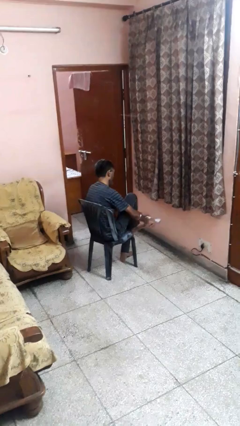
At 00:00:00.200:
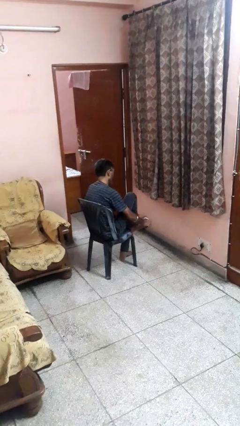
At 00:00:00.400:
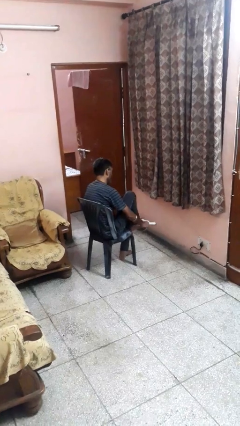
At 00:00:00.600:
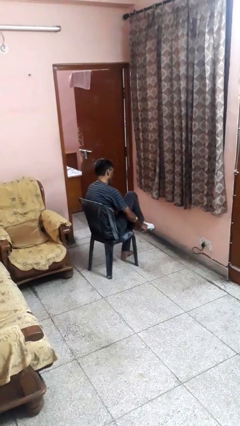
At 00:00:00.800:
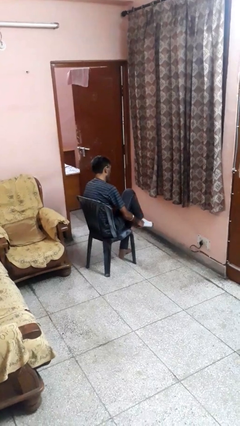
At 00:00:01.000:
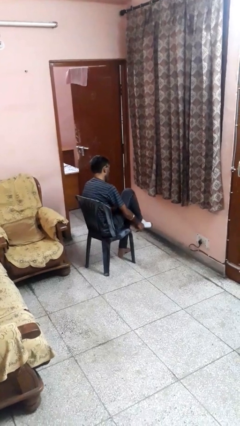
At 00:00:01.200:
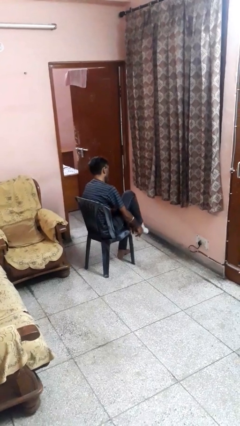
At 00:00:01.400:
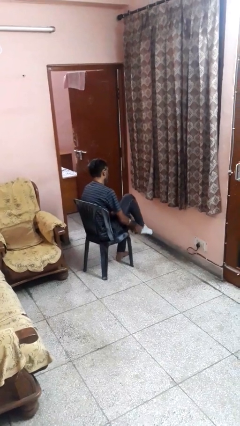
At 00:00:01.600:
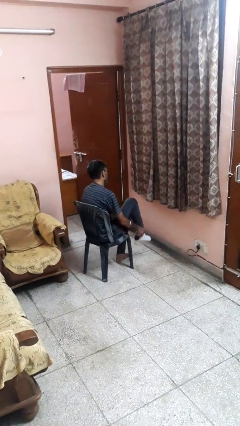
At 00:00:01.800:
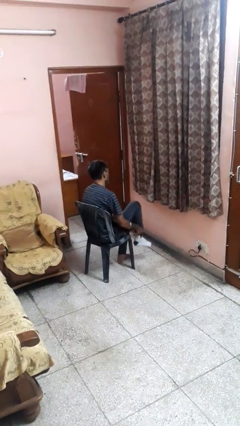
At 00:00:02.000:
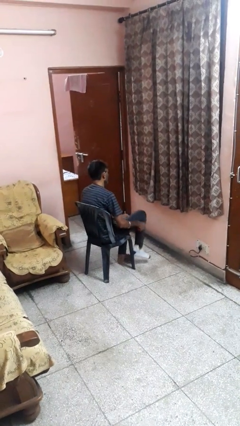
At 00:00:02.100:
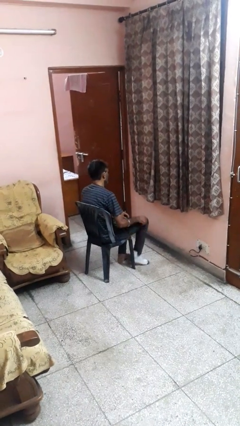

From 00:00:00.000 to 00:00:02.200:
person puts on socks

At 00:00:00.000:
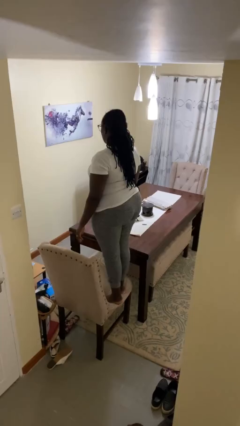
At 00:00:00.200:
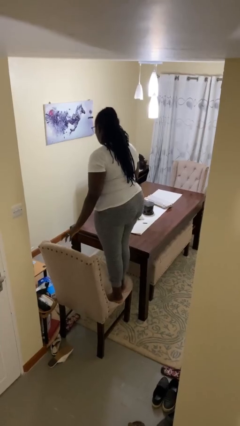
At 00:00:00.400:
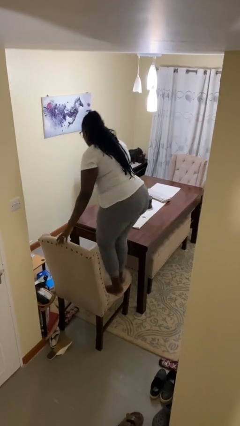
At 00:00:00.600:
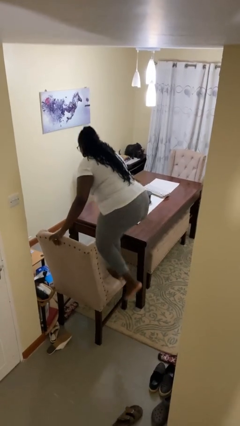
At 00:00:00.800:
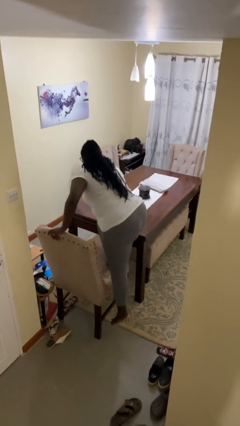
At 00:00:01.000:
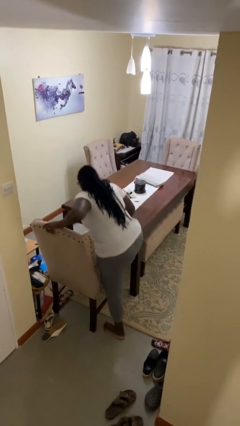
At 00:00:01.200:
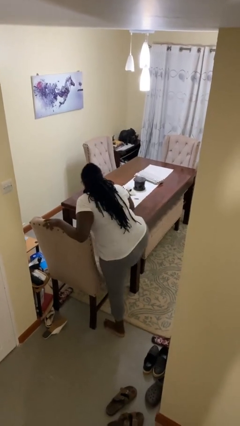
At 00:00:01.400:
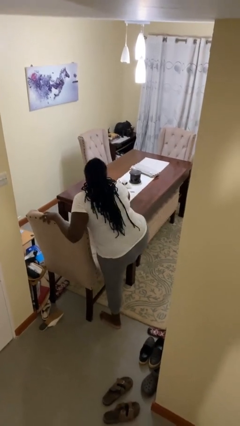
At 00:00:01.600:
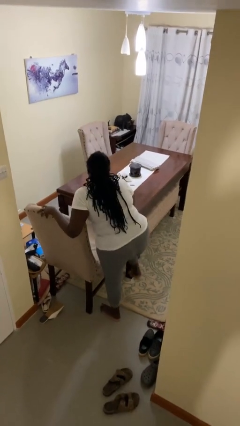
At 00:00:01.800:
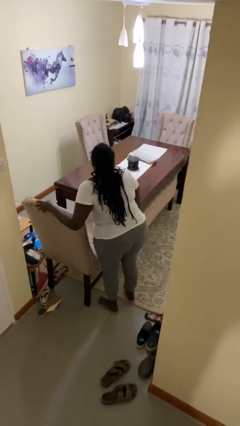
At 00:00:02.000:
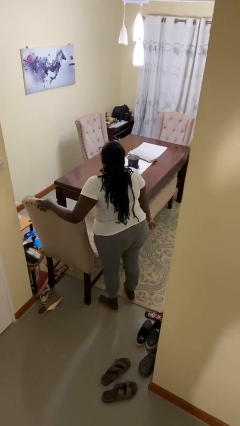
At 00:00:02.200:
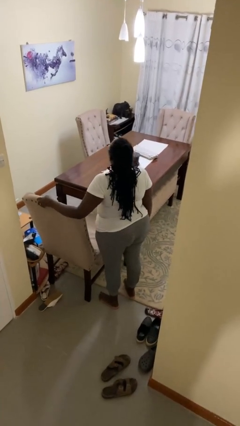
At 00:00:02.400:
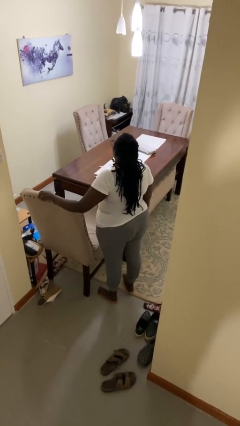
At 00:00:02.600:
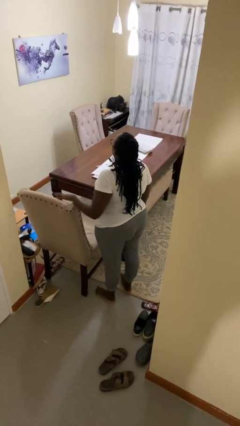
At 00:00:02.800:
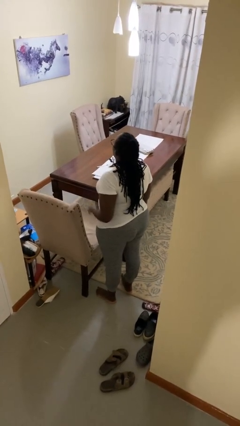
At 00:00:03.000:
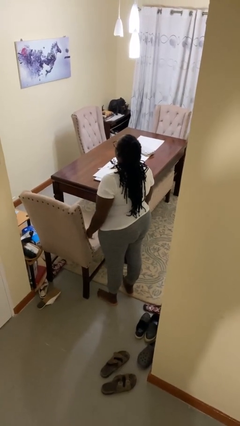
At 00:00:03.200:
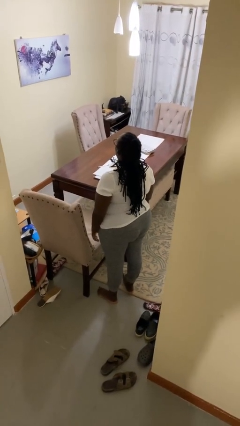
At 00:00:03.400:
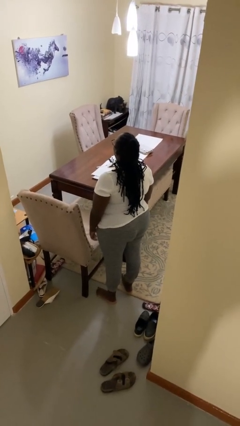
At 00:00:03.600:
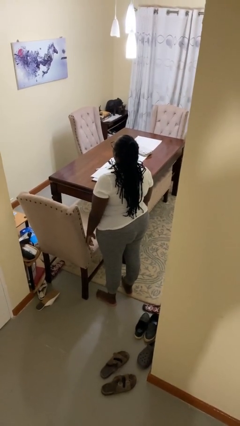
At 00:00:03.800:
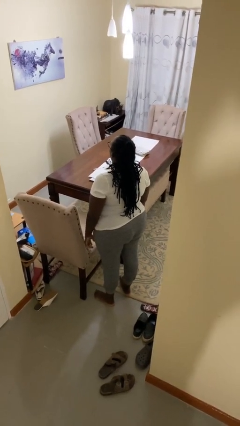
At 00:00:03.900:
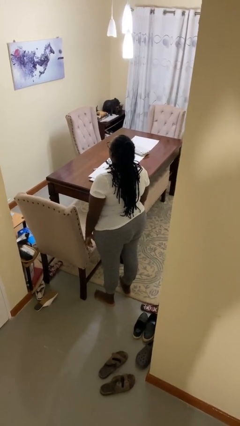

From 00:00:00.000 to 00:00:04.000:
person climbs off chair

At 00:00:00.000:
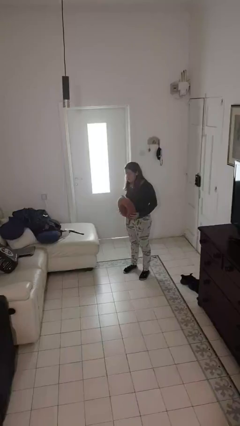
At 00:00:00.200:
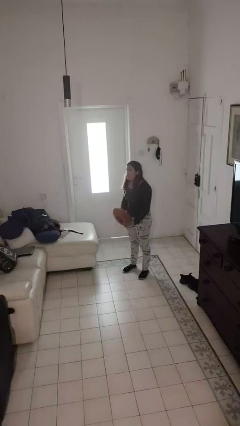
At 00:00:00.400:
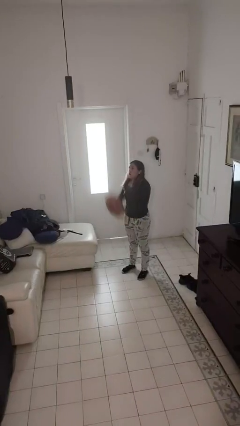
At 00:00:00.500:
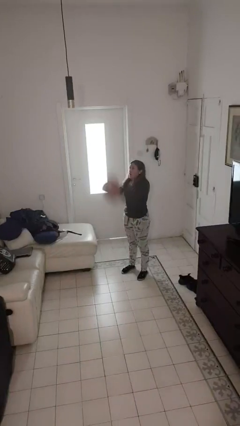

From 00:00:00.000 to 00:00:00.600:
person drops object

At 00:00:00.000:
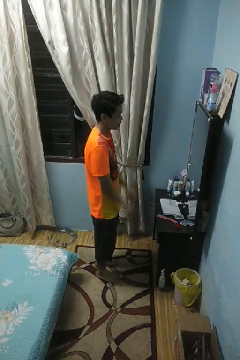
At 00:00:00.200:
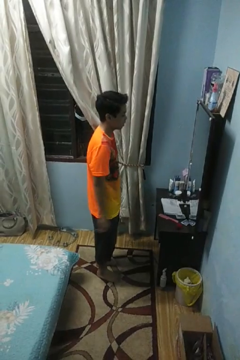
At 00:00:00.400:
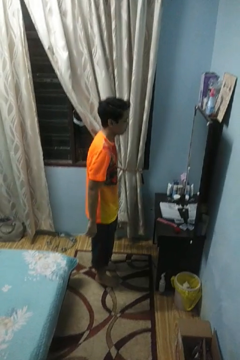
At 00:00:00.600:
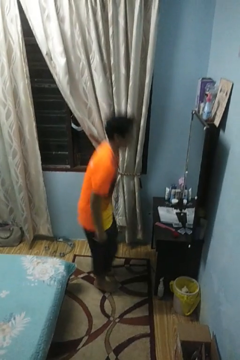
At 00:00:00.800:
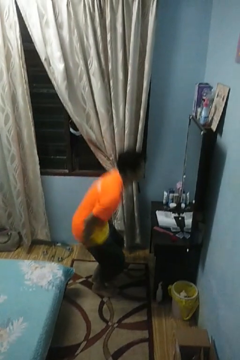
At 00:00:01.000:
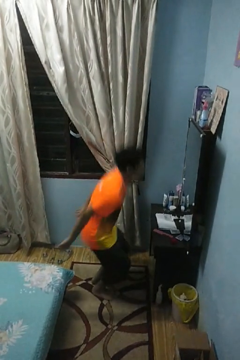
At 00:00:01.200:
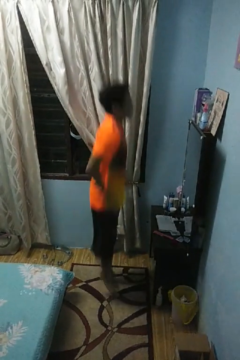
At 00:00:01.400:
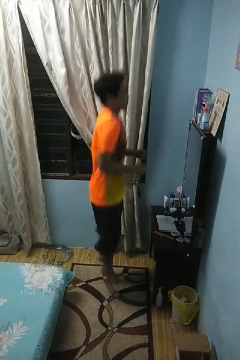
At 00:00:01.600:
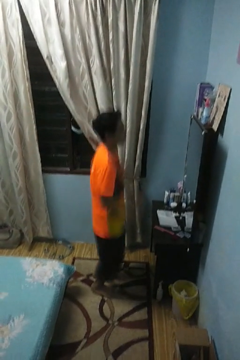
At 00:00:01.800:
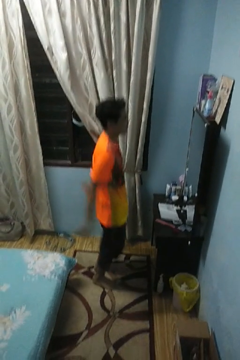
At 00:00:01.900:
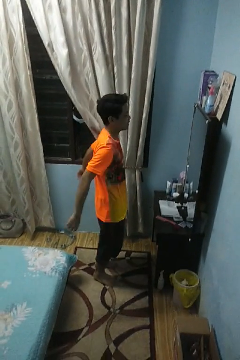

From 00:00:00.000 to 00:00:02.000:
person jumps

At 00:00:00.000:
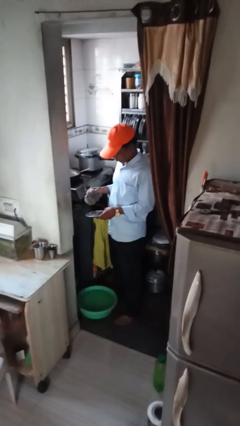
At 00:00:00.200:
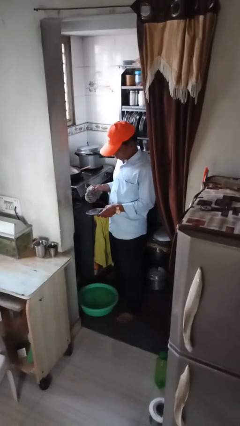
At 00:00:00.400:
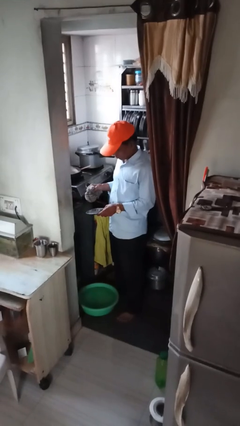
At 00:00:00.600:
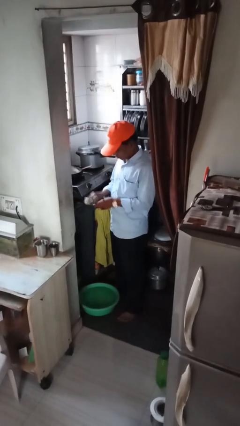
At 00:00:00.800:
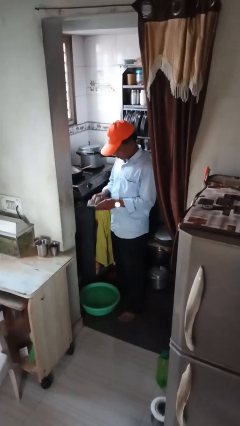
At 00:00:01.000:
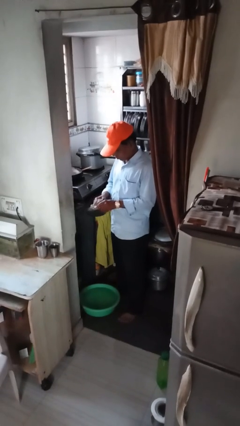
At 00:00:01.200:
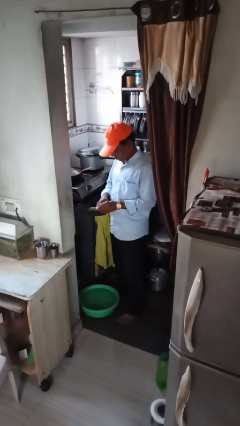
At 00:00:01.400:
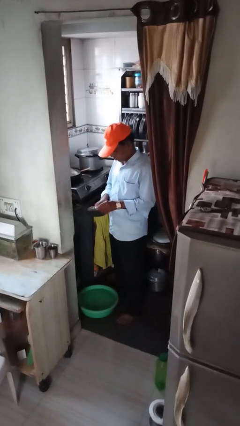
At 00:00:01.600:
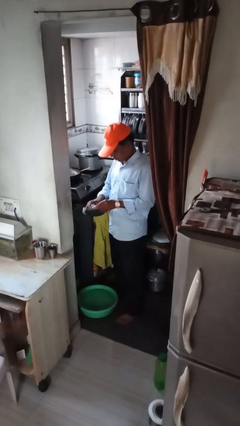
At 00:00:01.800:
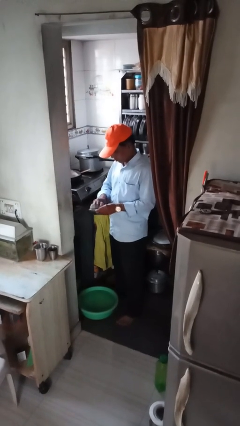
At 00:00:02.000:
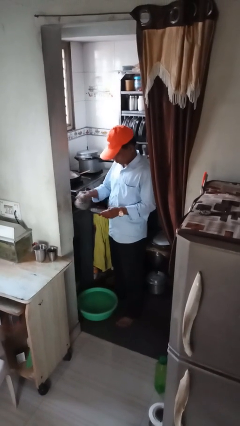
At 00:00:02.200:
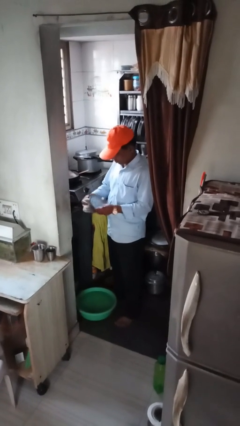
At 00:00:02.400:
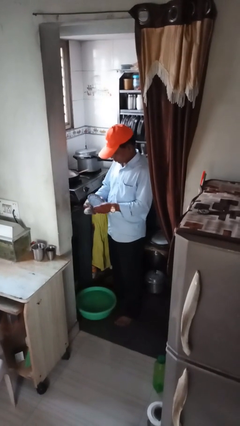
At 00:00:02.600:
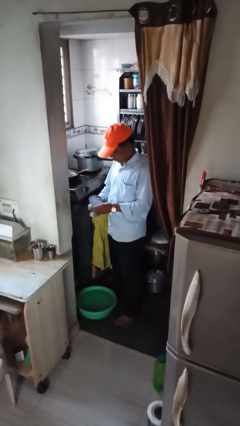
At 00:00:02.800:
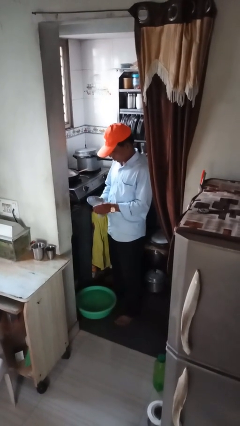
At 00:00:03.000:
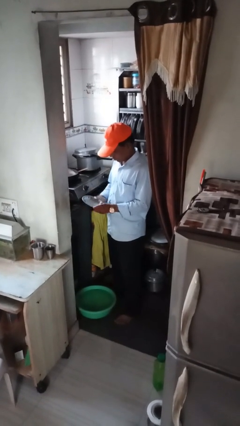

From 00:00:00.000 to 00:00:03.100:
person dries dish

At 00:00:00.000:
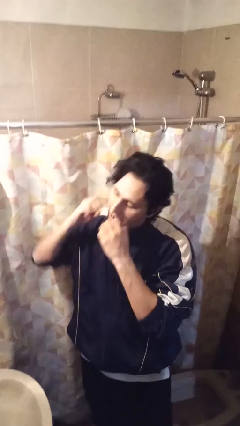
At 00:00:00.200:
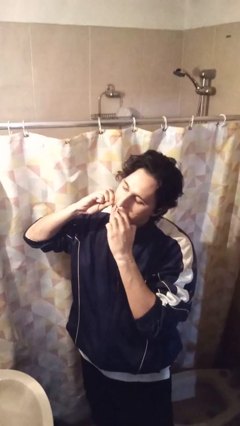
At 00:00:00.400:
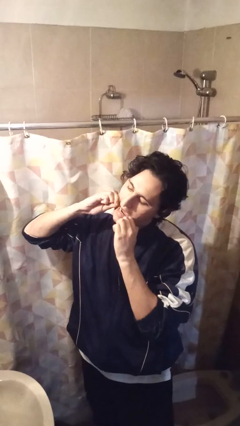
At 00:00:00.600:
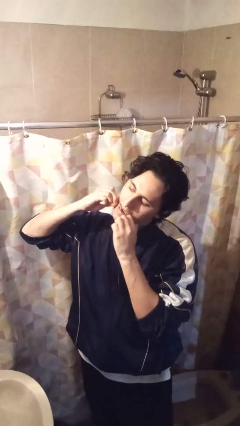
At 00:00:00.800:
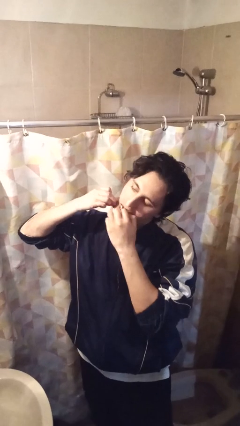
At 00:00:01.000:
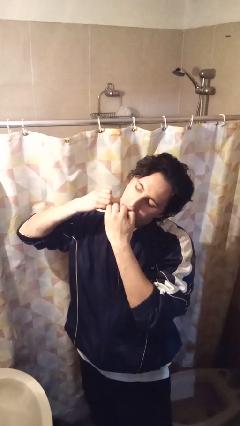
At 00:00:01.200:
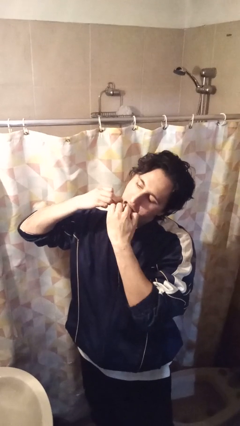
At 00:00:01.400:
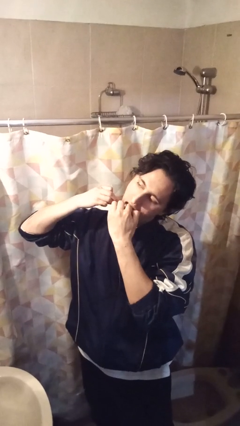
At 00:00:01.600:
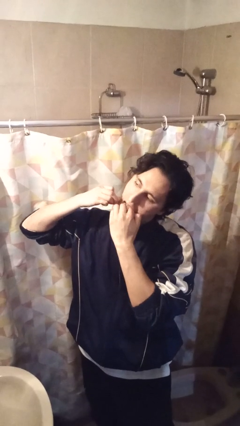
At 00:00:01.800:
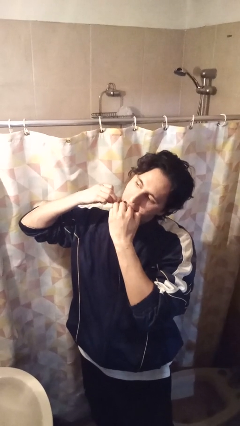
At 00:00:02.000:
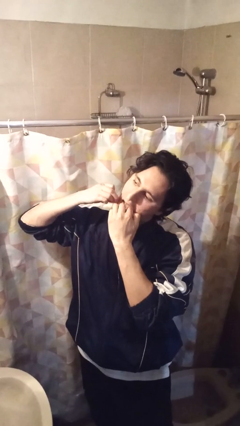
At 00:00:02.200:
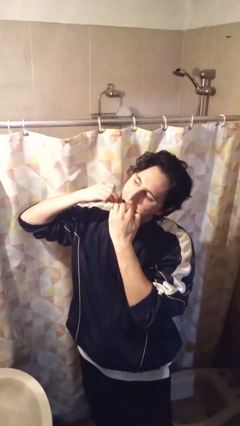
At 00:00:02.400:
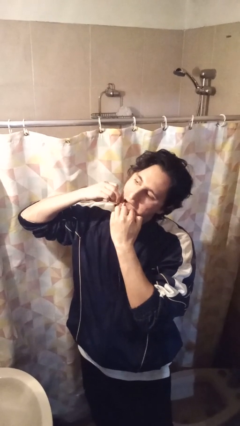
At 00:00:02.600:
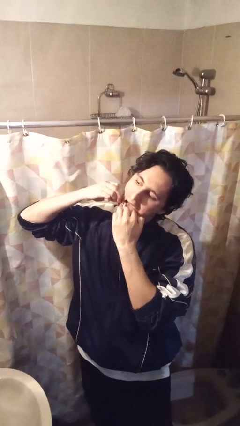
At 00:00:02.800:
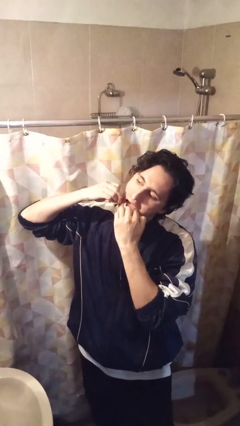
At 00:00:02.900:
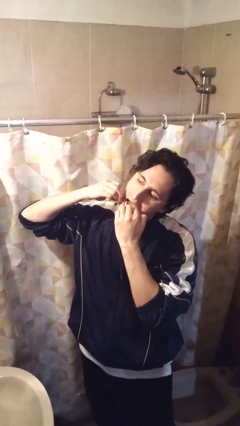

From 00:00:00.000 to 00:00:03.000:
person flosses

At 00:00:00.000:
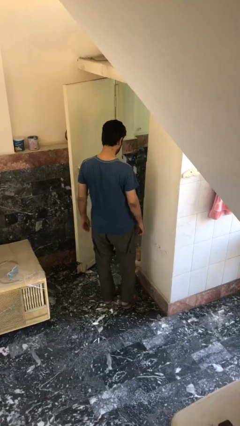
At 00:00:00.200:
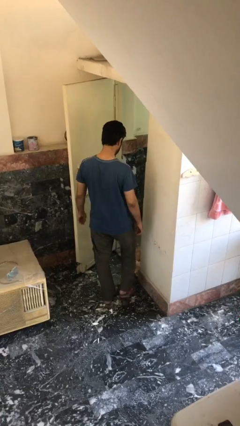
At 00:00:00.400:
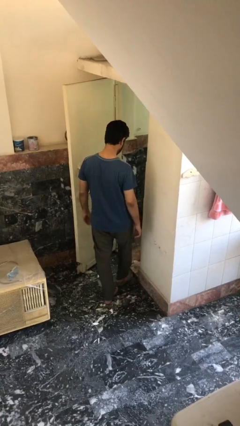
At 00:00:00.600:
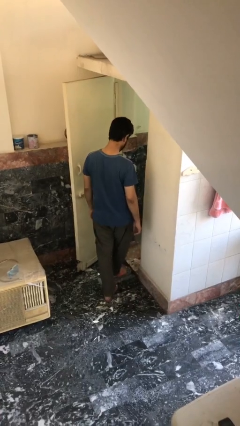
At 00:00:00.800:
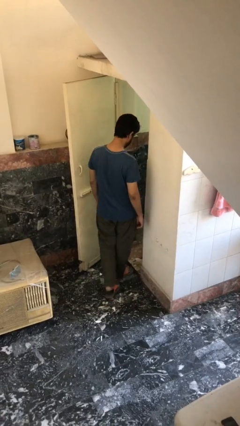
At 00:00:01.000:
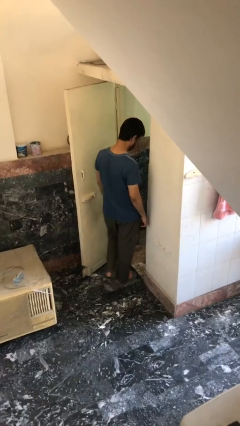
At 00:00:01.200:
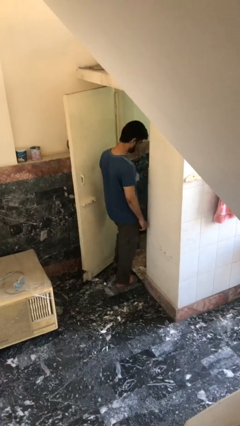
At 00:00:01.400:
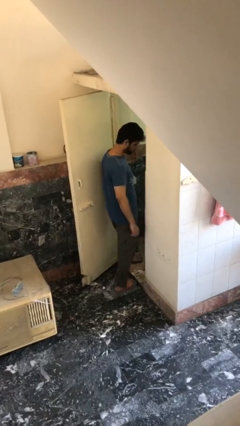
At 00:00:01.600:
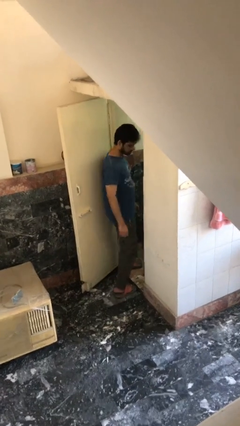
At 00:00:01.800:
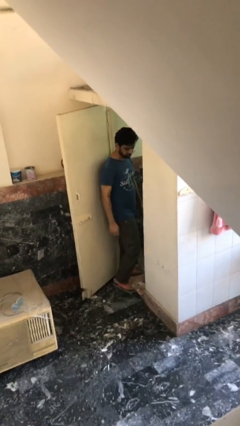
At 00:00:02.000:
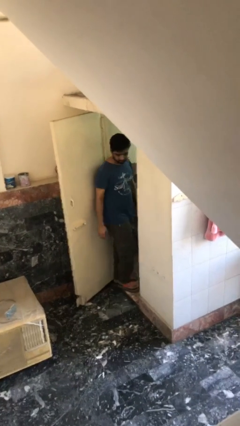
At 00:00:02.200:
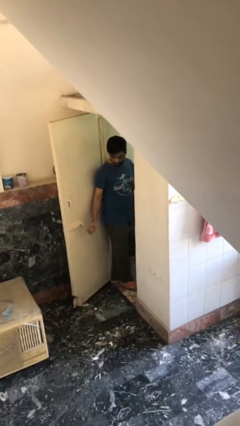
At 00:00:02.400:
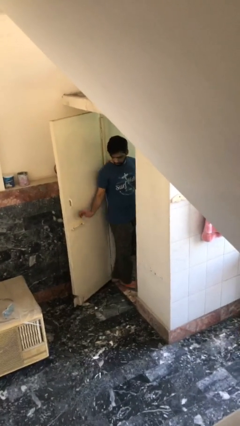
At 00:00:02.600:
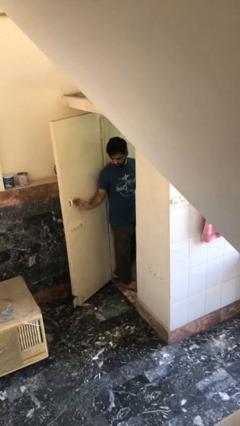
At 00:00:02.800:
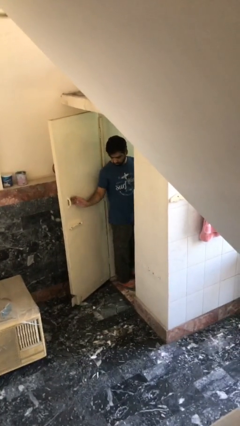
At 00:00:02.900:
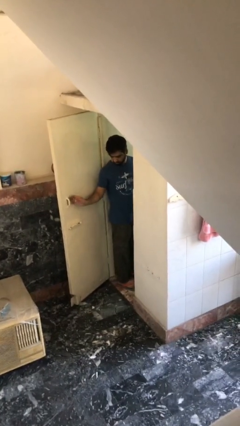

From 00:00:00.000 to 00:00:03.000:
person exits scene through structure
